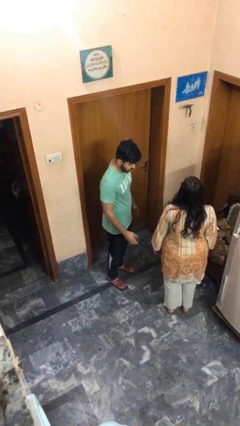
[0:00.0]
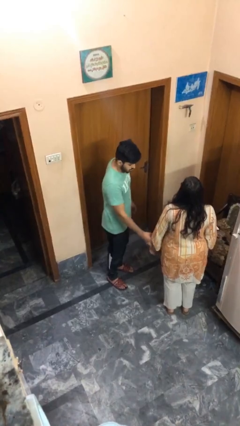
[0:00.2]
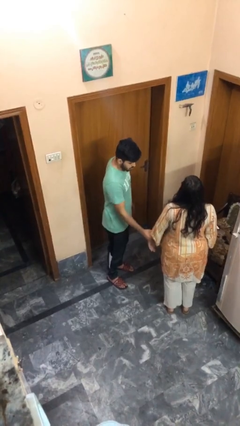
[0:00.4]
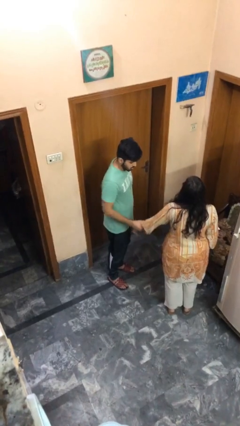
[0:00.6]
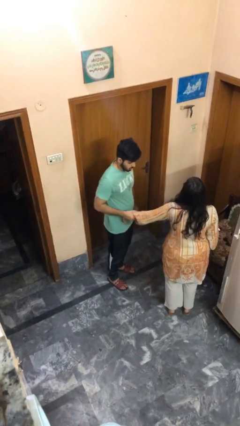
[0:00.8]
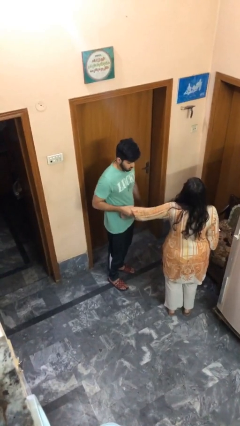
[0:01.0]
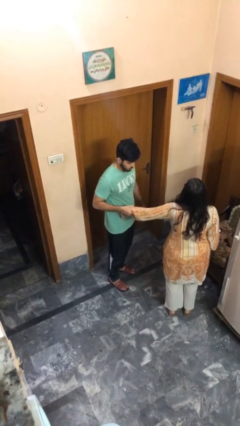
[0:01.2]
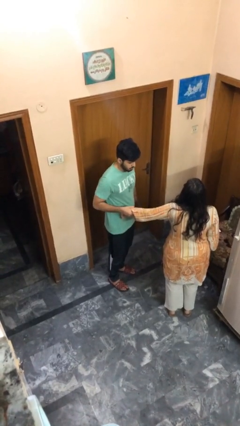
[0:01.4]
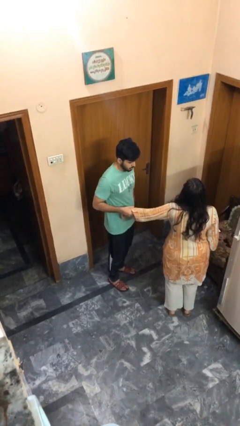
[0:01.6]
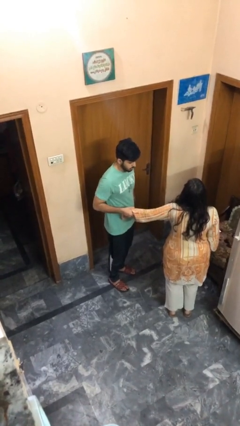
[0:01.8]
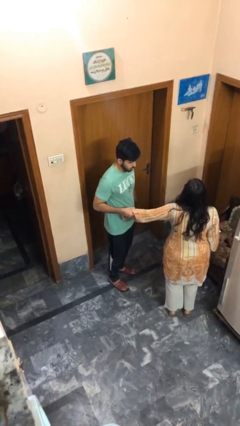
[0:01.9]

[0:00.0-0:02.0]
person grabs person by forearm

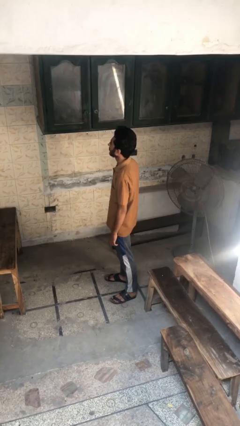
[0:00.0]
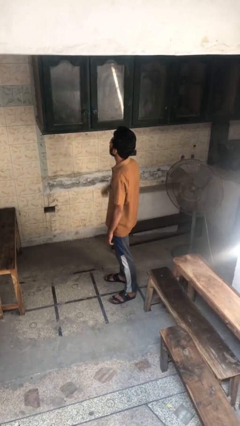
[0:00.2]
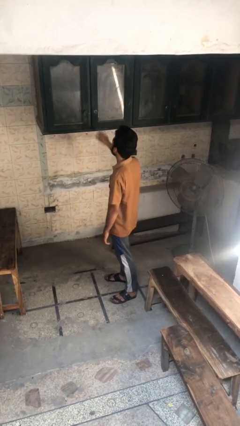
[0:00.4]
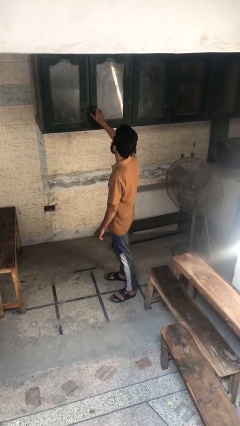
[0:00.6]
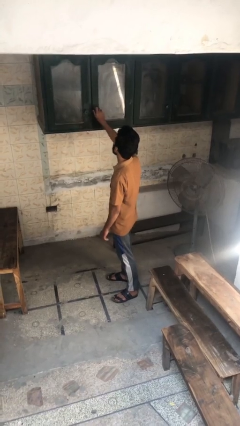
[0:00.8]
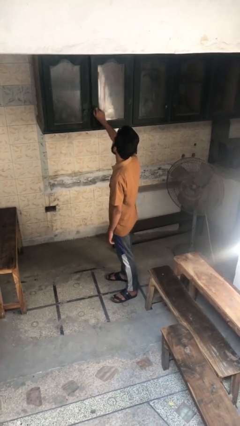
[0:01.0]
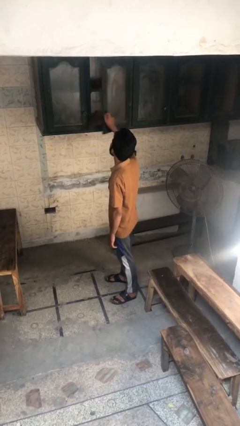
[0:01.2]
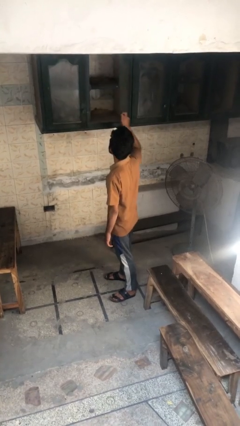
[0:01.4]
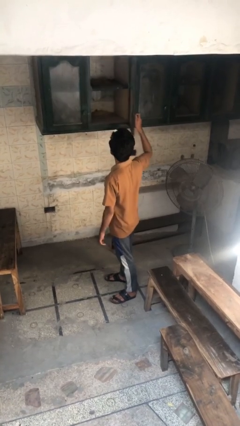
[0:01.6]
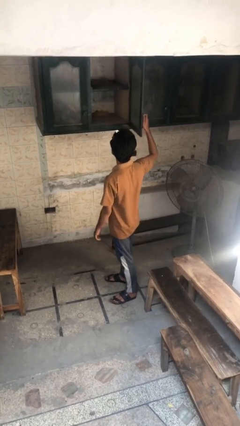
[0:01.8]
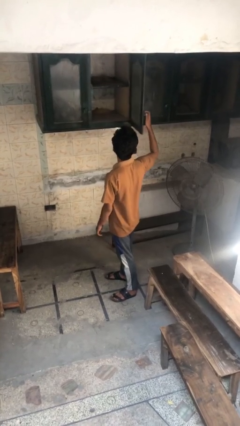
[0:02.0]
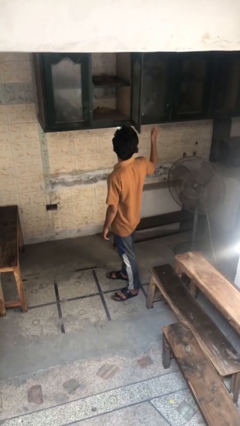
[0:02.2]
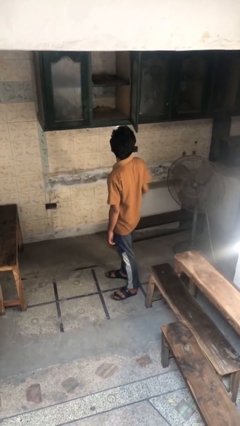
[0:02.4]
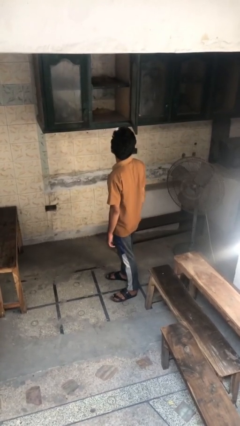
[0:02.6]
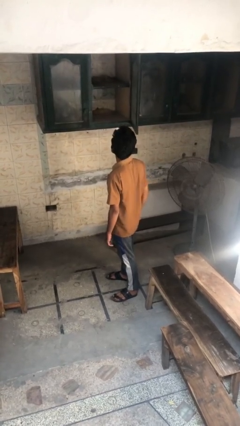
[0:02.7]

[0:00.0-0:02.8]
person opens cabinet

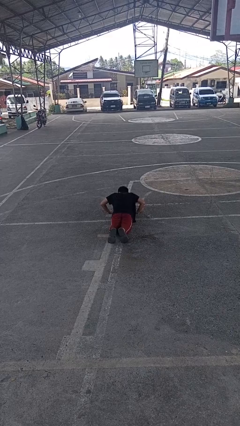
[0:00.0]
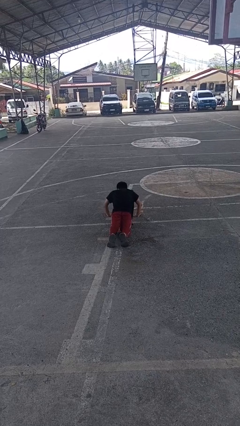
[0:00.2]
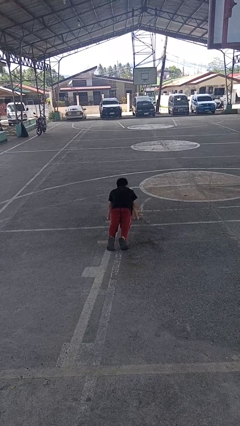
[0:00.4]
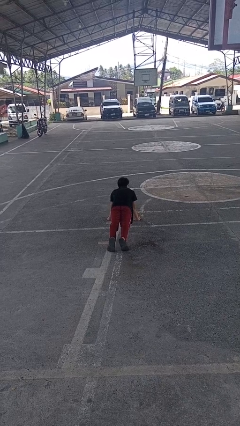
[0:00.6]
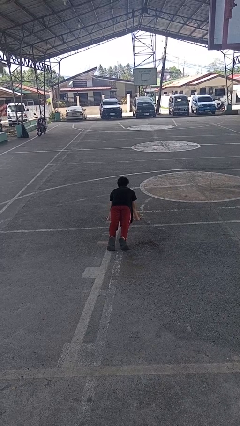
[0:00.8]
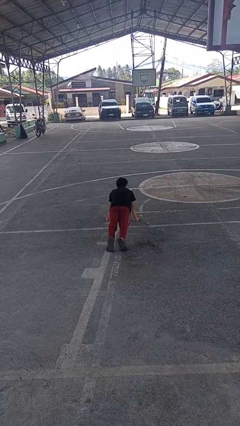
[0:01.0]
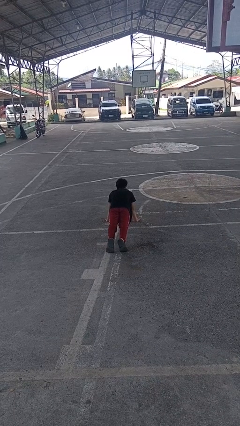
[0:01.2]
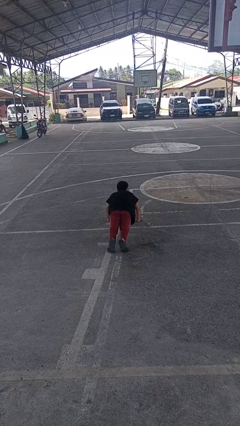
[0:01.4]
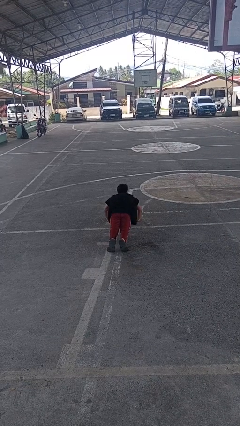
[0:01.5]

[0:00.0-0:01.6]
person exercises with pushup

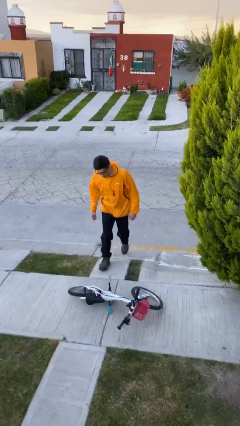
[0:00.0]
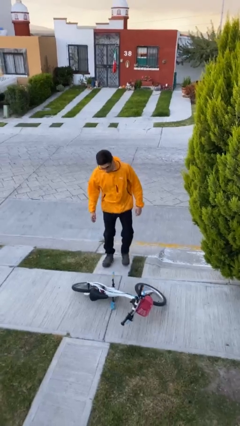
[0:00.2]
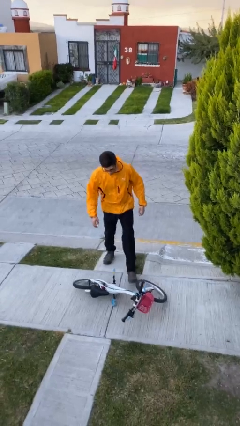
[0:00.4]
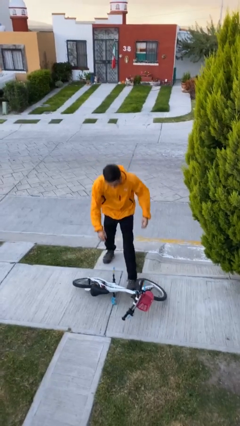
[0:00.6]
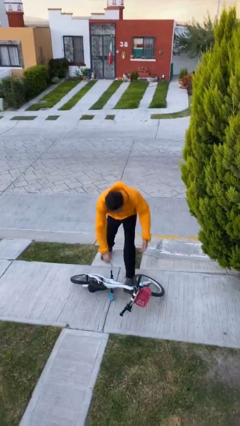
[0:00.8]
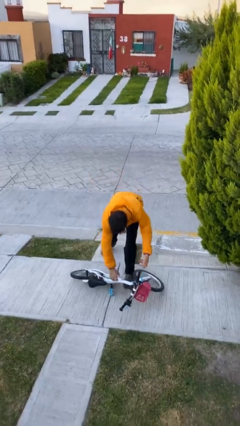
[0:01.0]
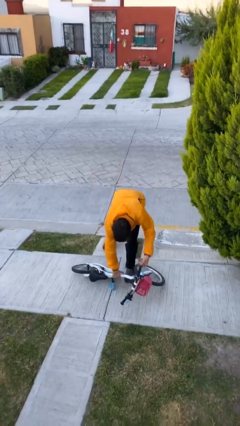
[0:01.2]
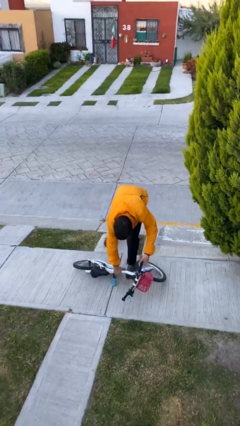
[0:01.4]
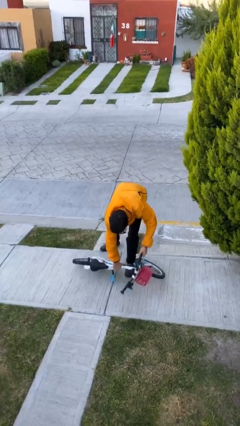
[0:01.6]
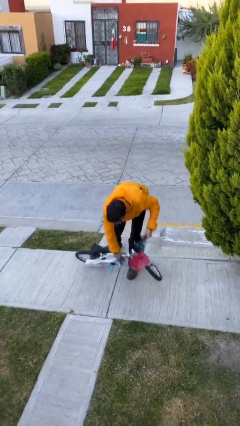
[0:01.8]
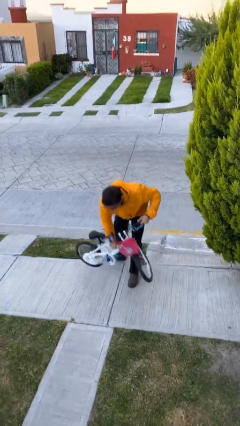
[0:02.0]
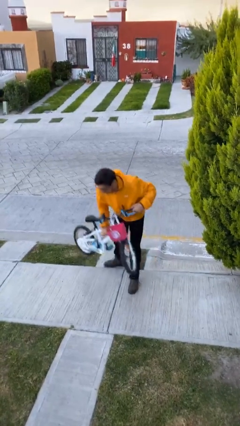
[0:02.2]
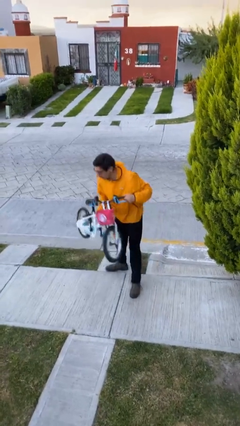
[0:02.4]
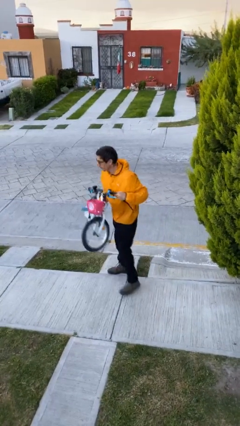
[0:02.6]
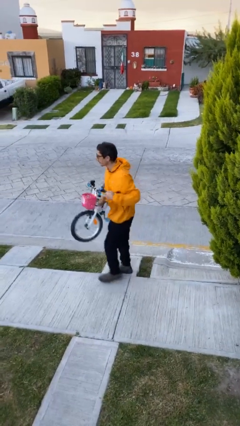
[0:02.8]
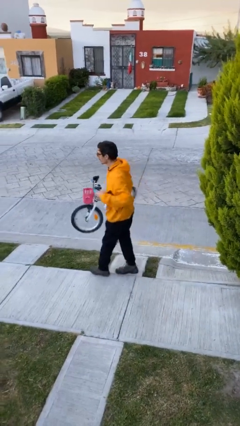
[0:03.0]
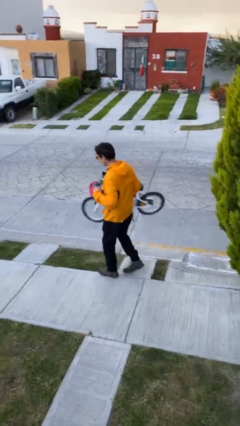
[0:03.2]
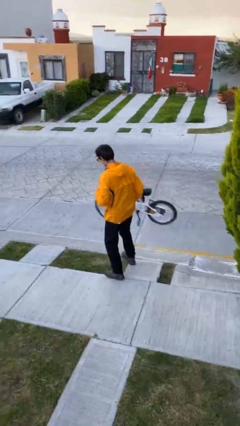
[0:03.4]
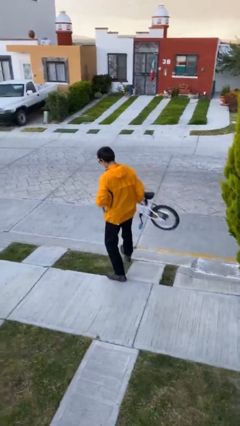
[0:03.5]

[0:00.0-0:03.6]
person picks up object from floor

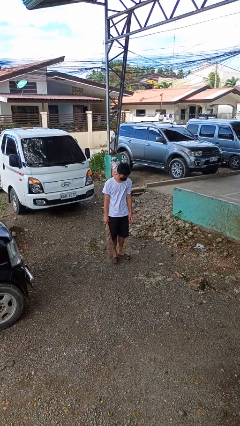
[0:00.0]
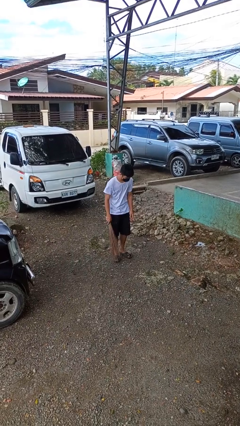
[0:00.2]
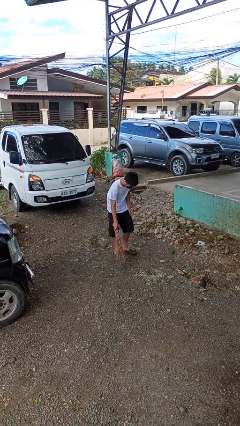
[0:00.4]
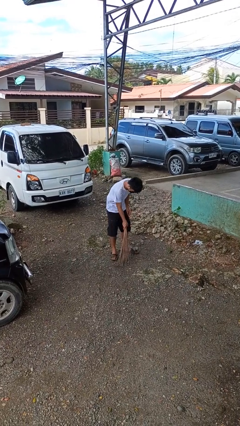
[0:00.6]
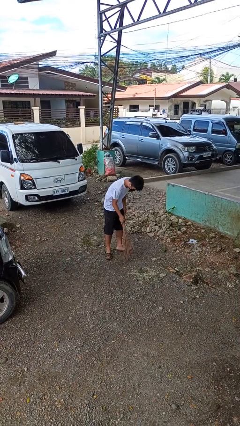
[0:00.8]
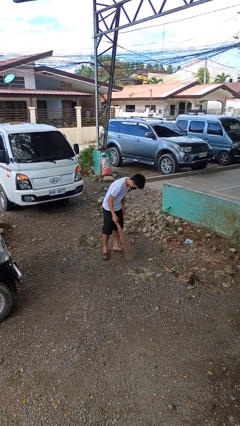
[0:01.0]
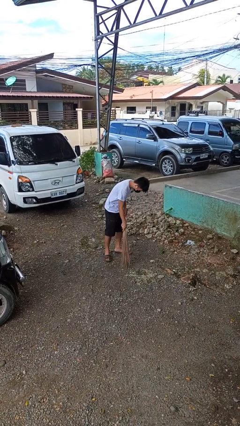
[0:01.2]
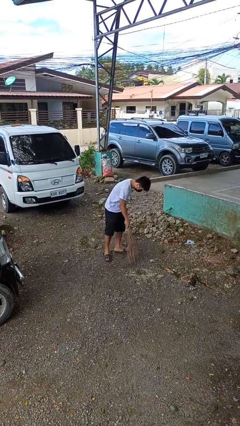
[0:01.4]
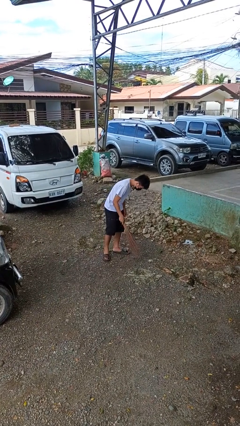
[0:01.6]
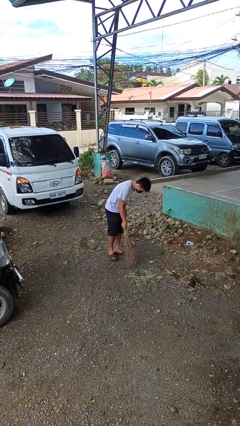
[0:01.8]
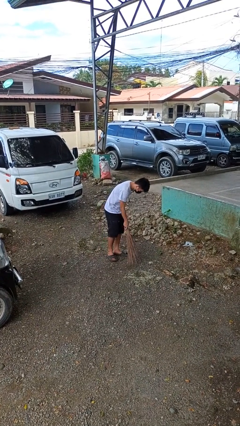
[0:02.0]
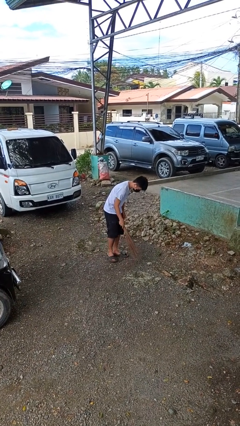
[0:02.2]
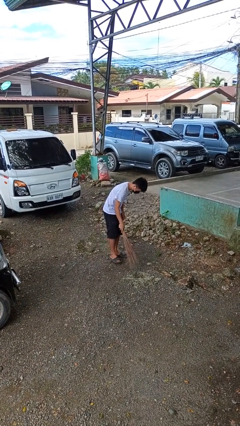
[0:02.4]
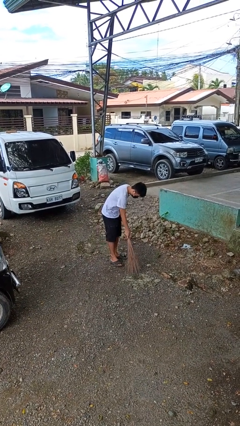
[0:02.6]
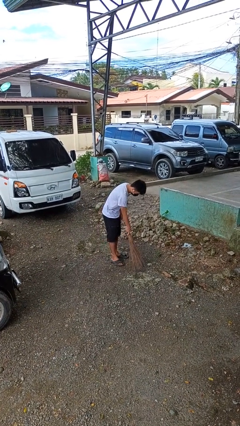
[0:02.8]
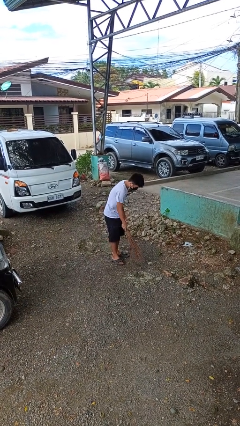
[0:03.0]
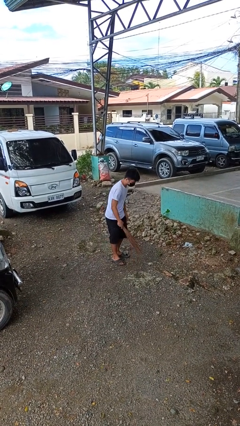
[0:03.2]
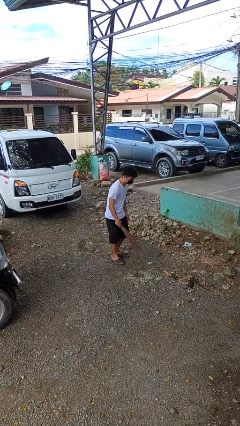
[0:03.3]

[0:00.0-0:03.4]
person sweeps floor

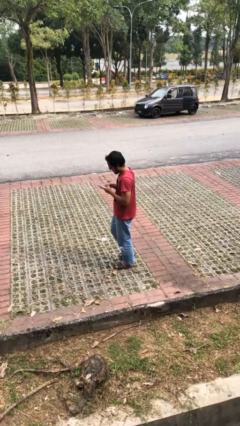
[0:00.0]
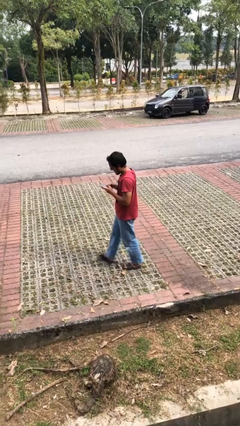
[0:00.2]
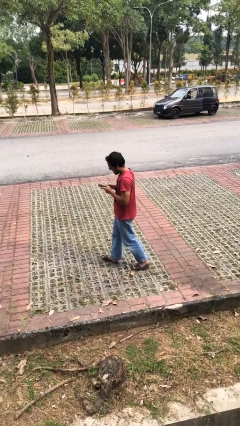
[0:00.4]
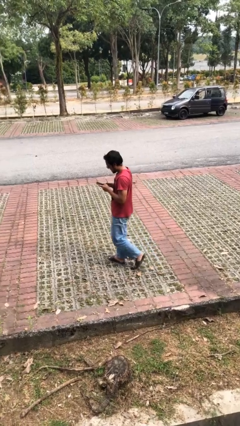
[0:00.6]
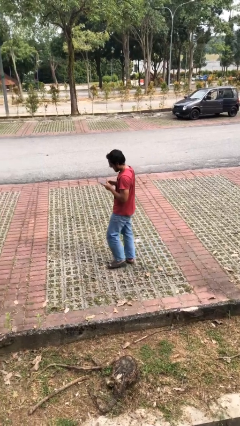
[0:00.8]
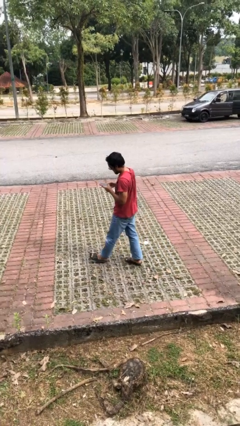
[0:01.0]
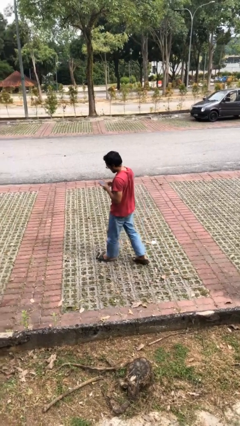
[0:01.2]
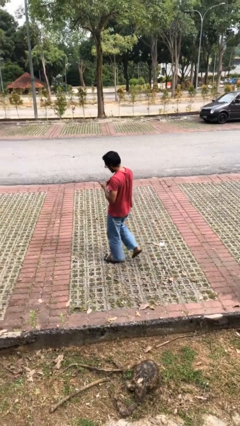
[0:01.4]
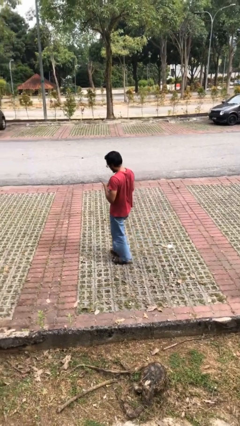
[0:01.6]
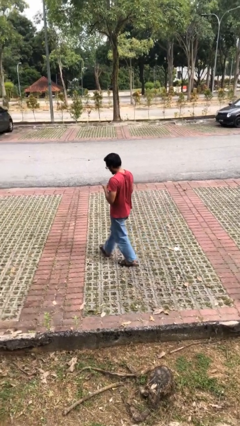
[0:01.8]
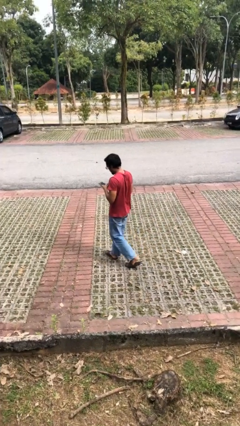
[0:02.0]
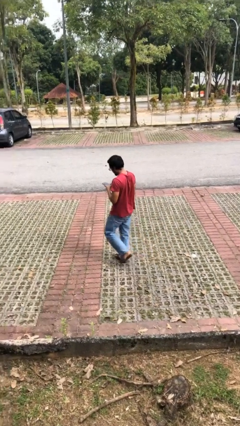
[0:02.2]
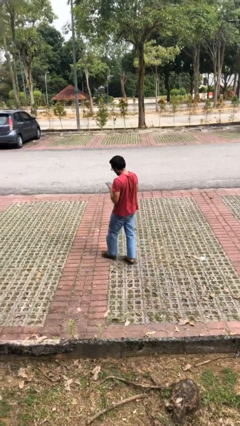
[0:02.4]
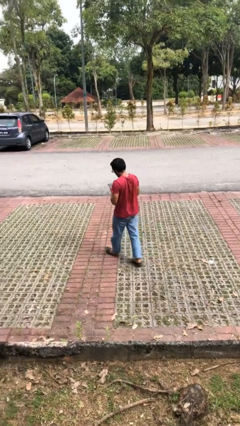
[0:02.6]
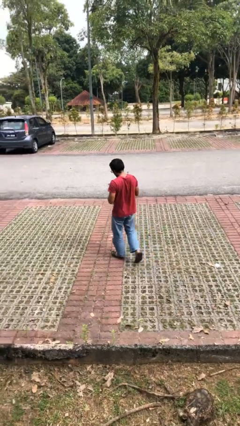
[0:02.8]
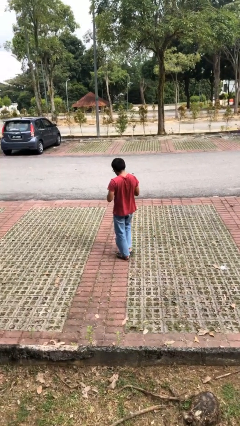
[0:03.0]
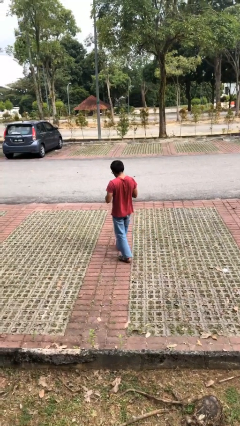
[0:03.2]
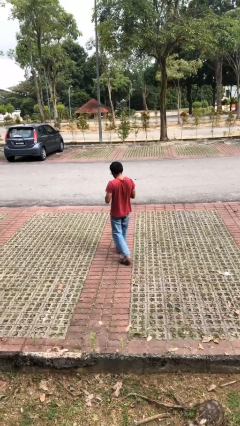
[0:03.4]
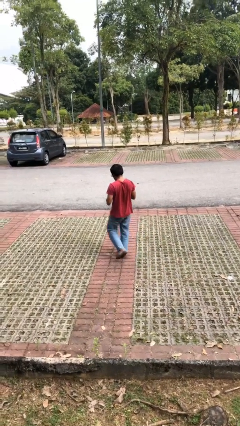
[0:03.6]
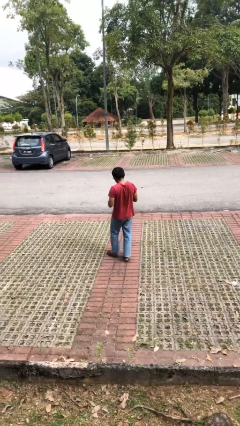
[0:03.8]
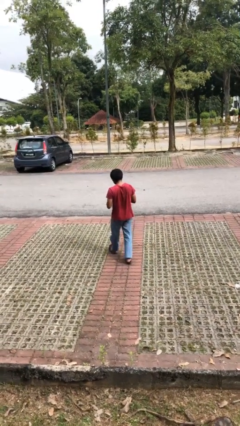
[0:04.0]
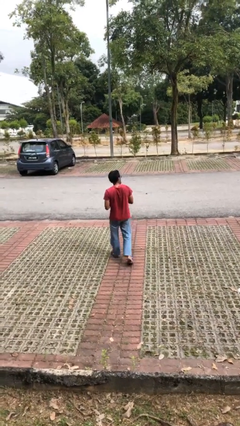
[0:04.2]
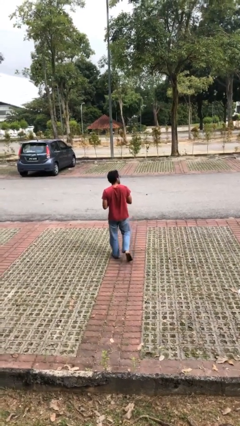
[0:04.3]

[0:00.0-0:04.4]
person texts on phone
